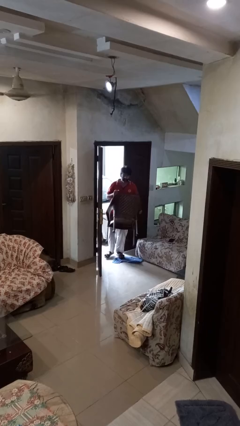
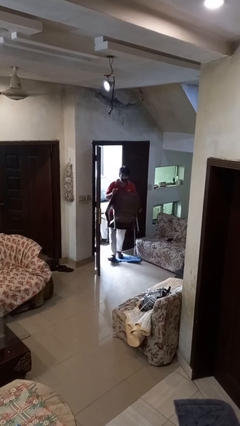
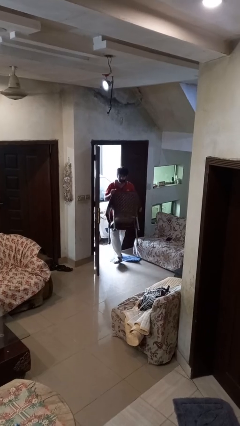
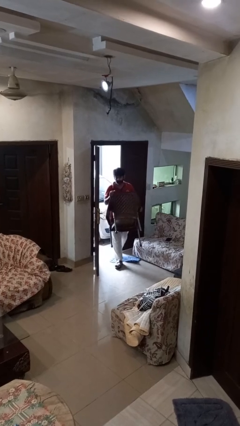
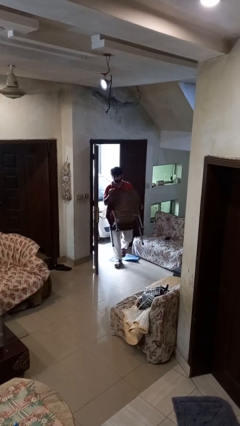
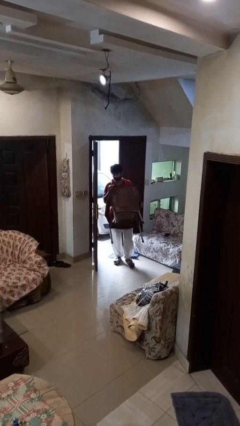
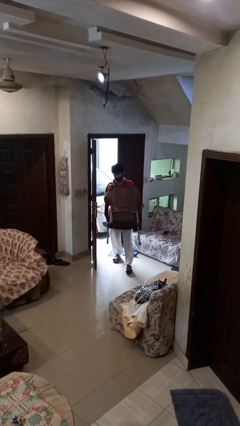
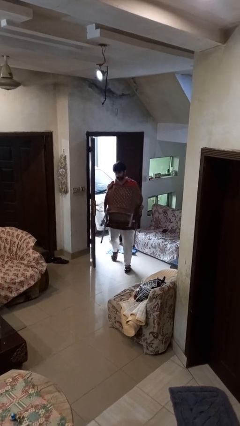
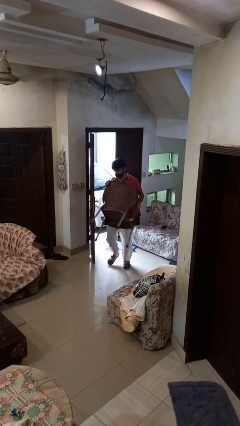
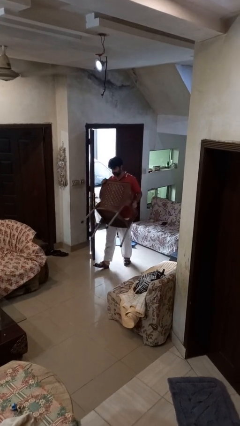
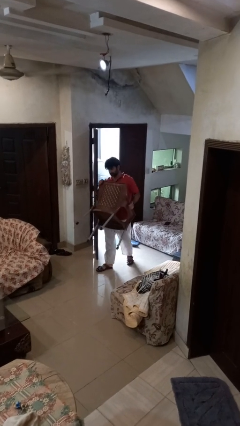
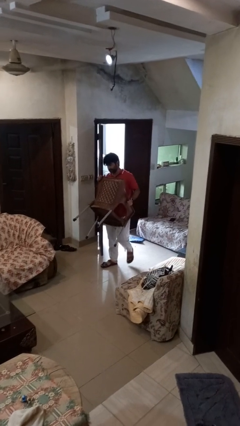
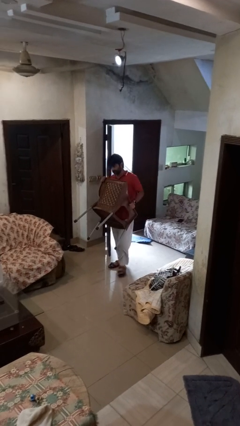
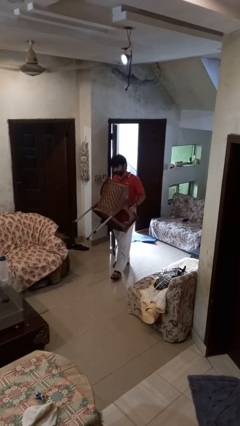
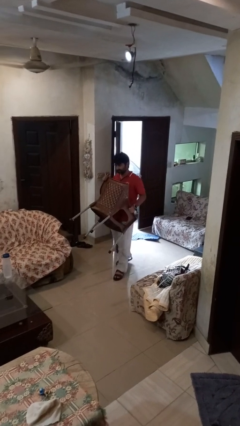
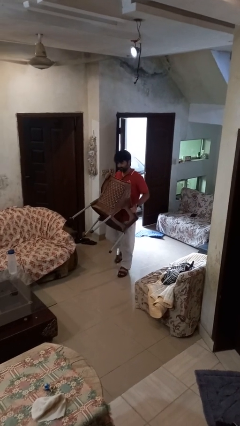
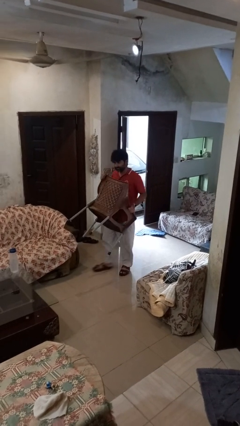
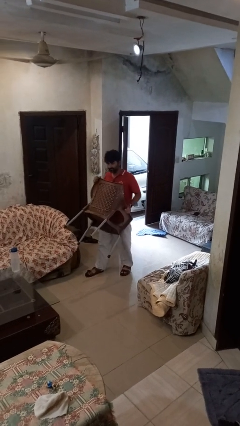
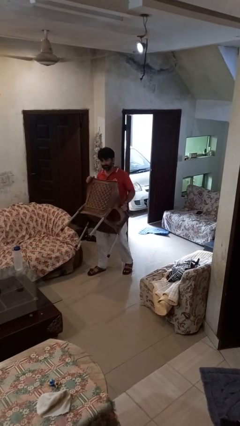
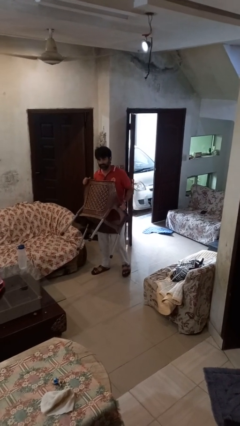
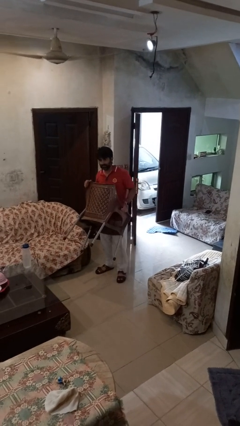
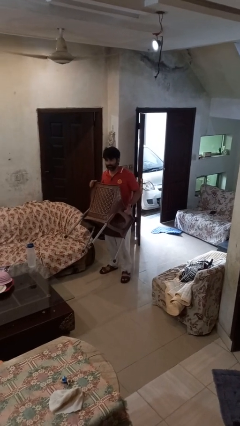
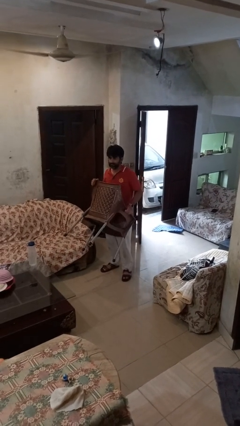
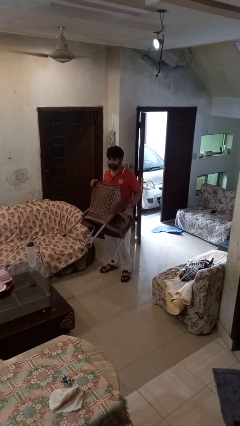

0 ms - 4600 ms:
person carries furniture

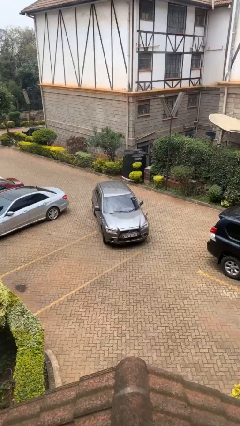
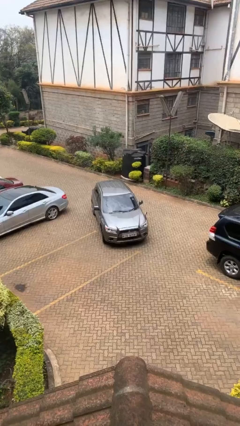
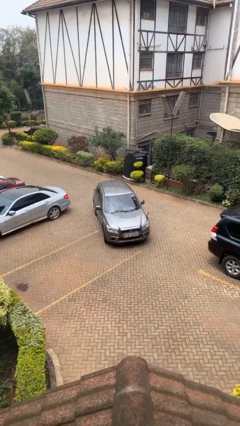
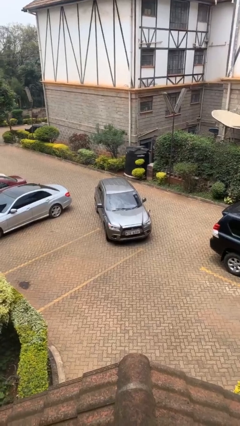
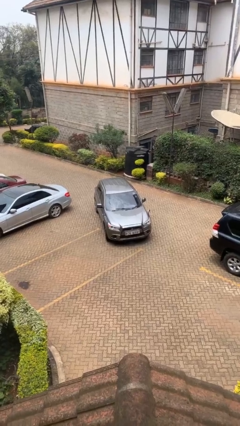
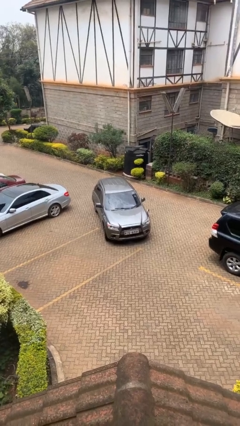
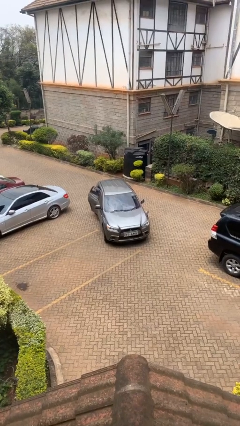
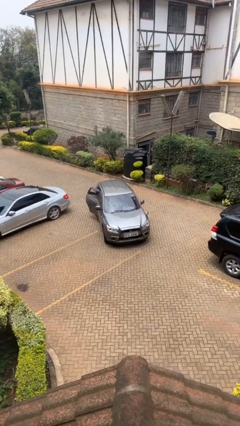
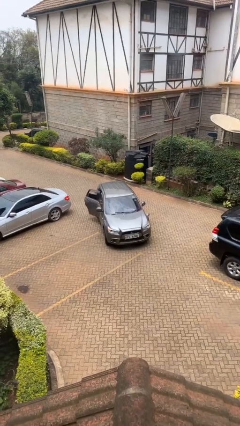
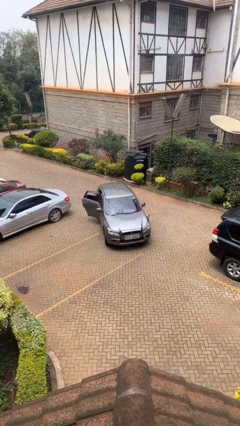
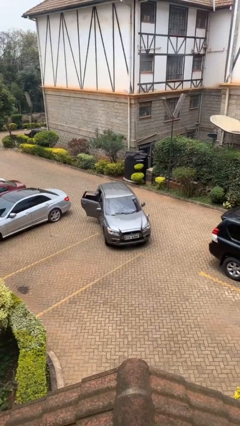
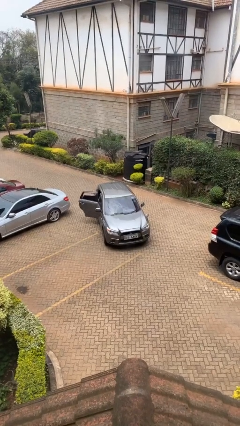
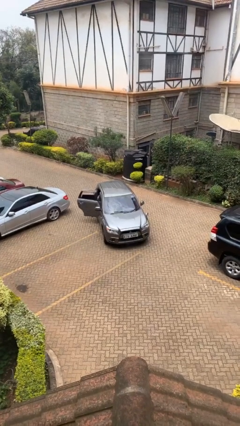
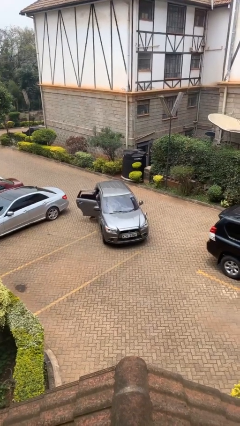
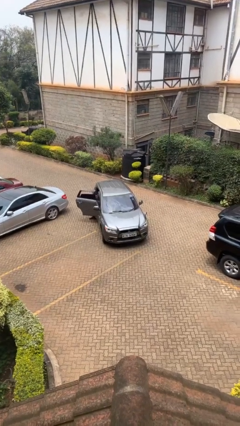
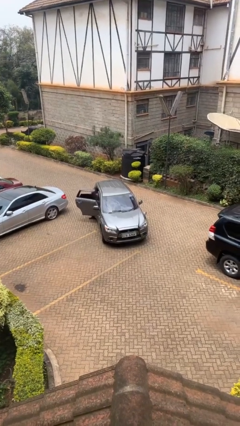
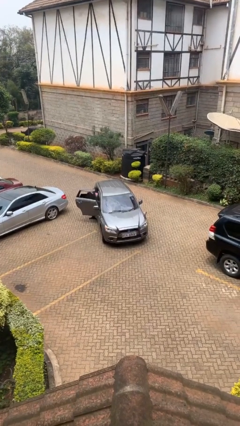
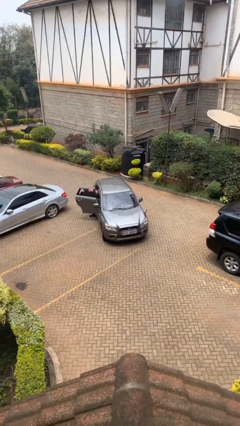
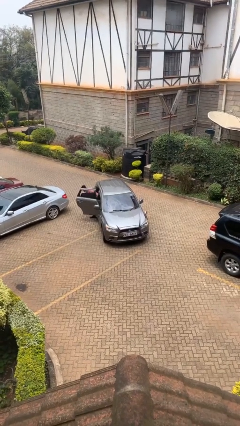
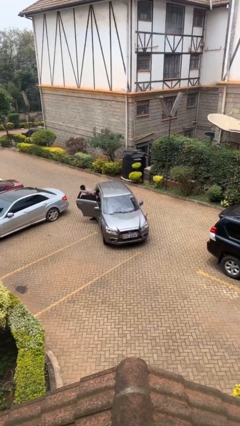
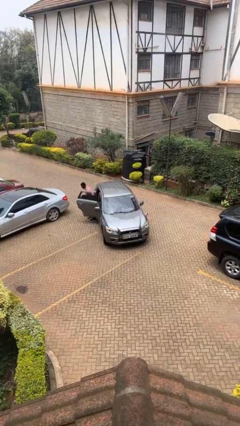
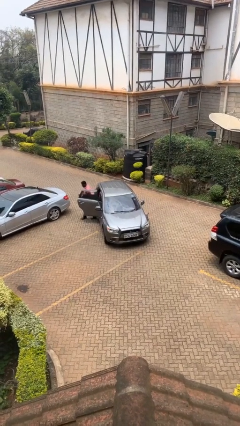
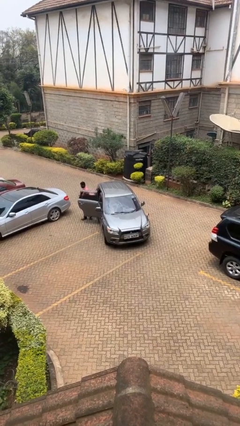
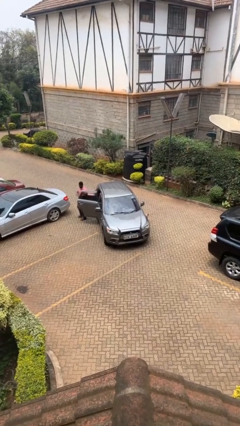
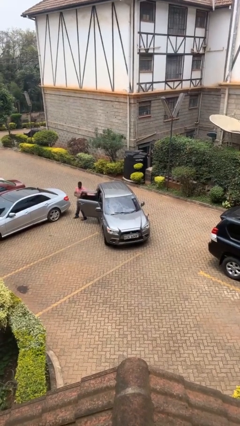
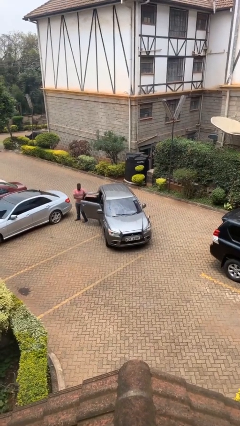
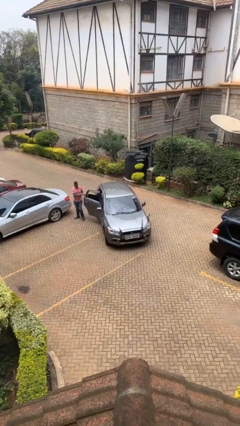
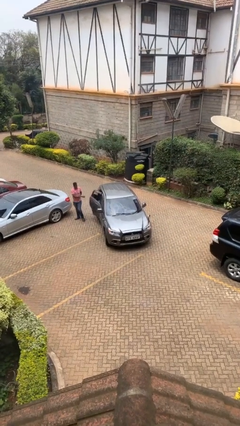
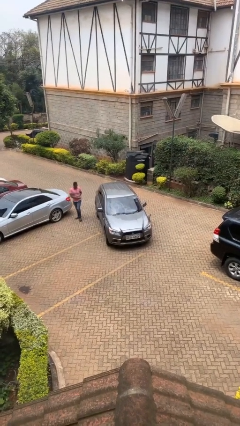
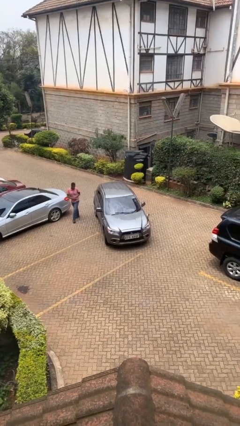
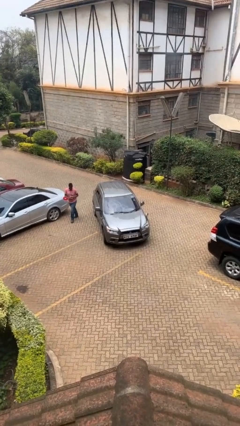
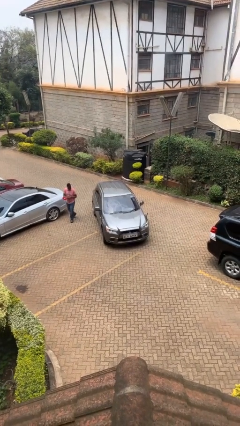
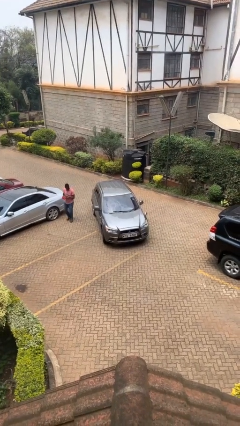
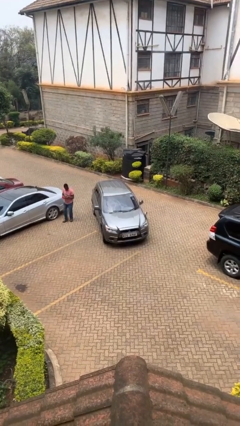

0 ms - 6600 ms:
car drops off person

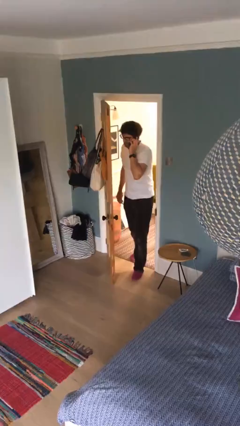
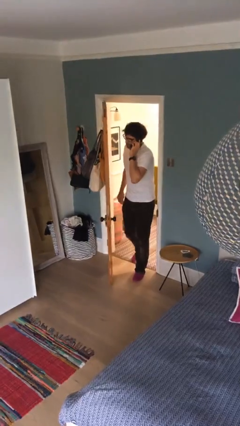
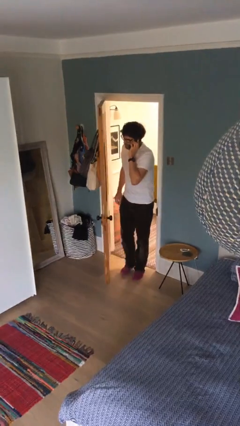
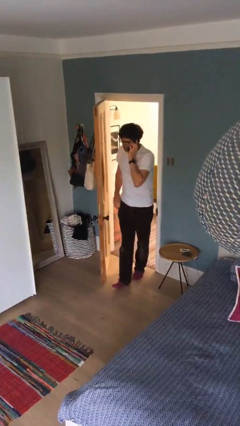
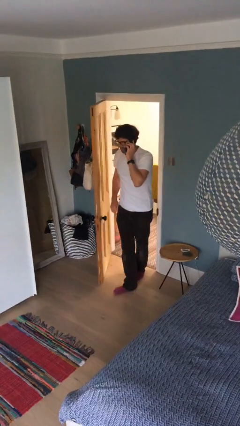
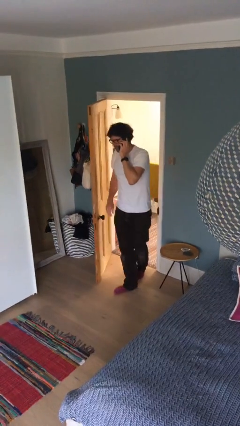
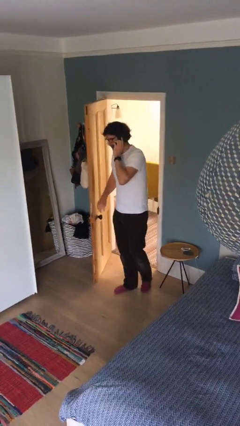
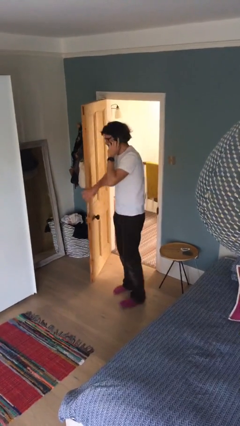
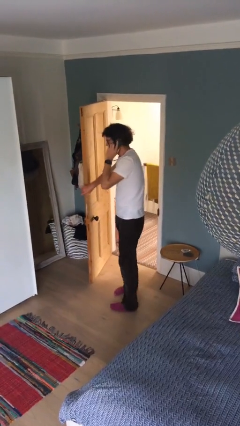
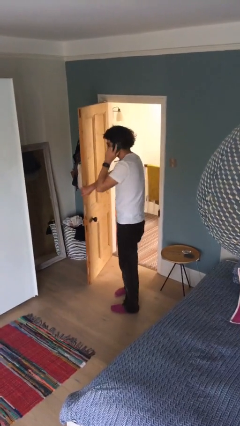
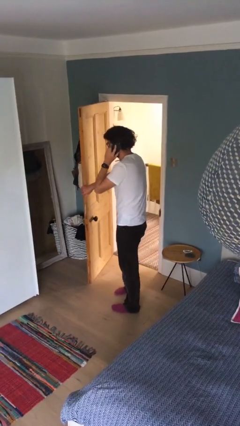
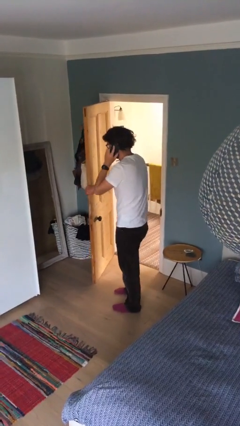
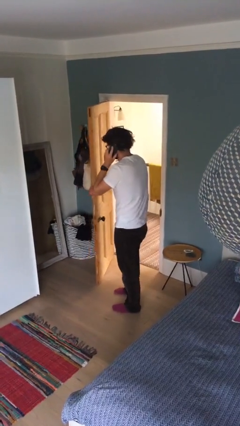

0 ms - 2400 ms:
person enters scene through structure

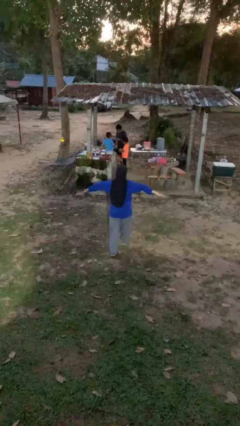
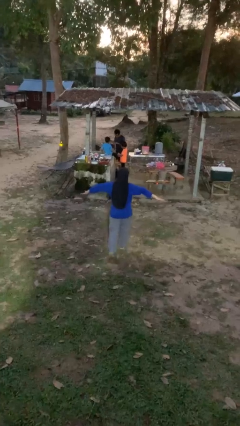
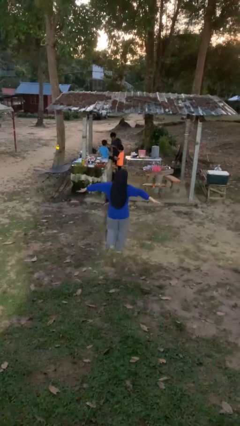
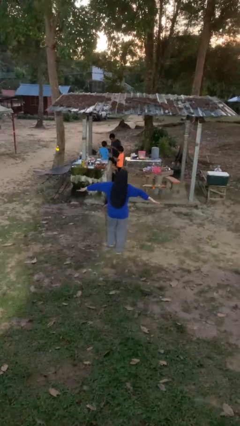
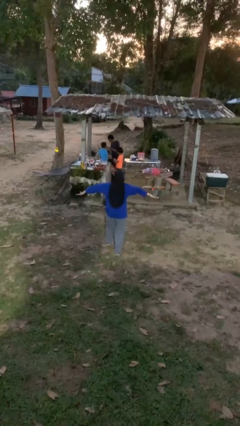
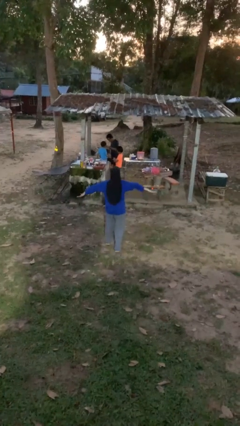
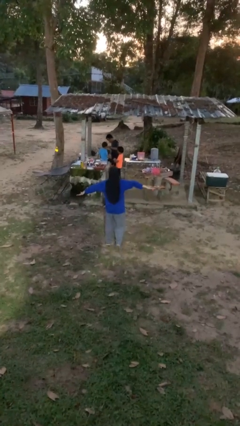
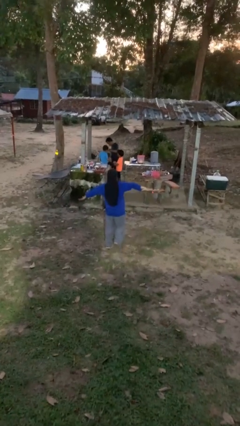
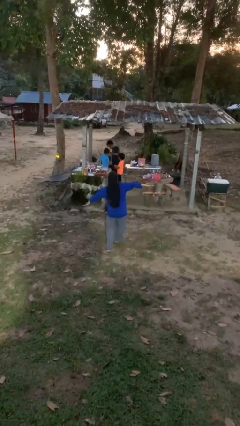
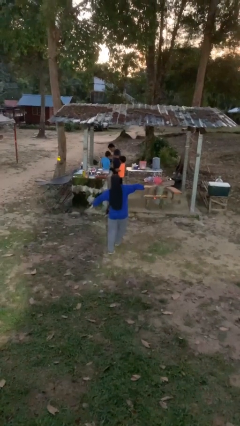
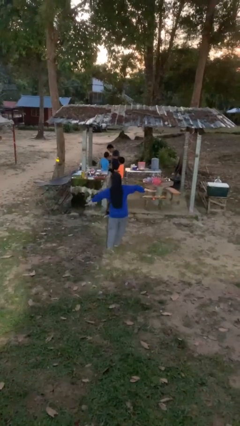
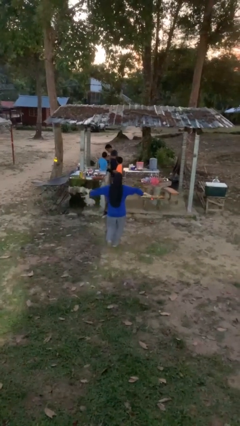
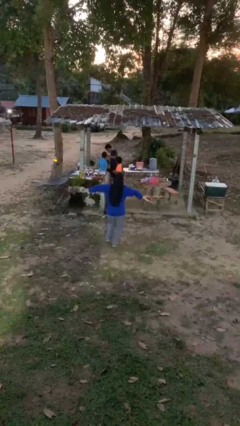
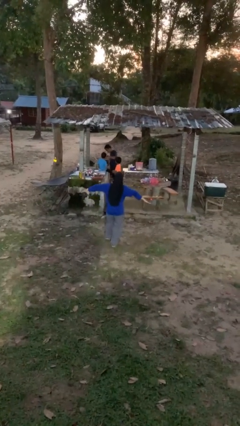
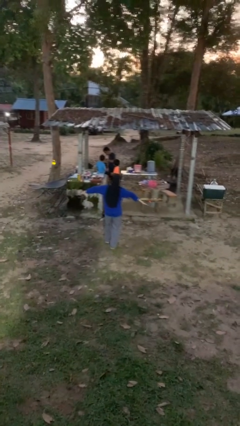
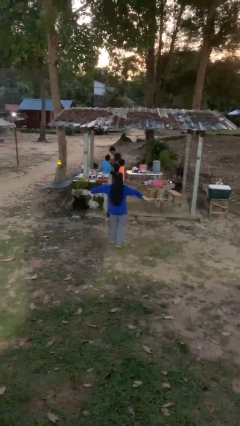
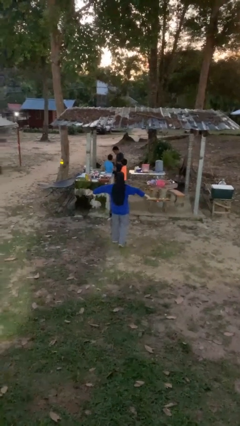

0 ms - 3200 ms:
person walks tiptoe

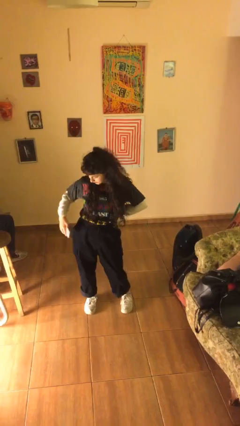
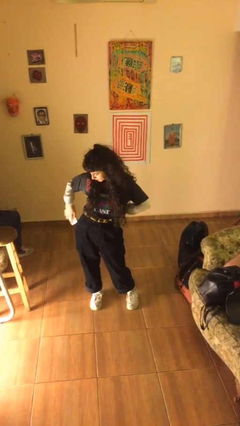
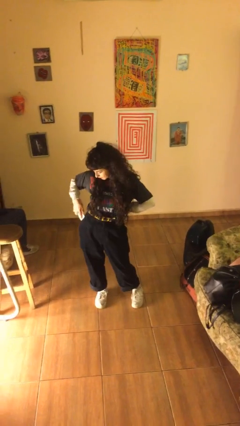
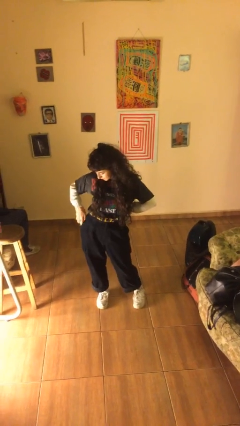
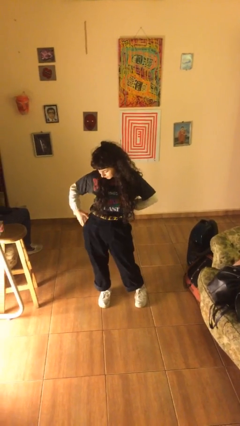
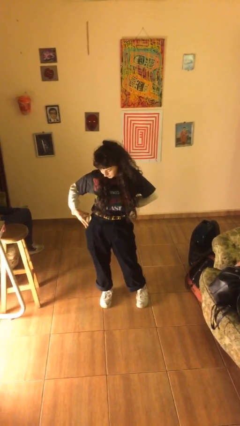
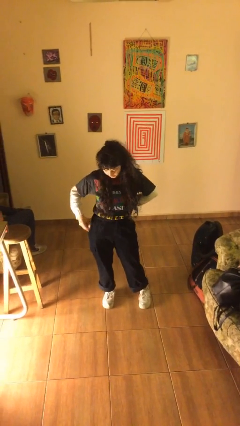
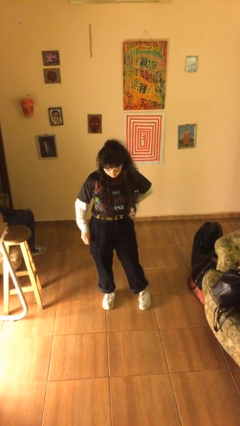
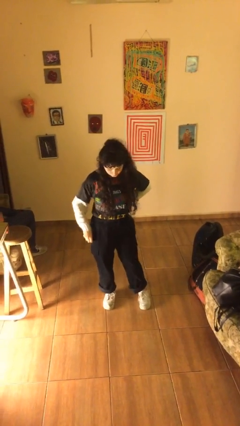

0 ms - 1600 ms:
person puts phone into pocket
